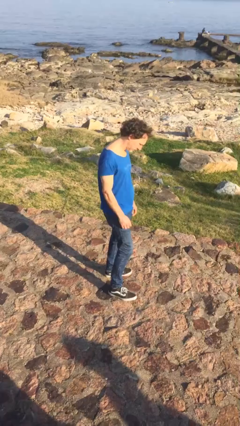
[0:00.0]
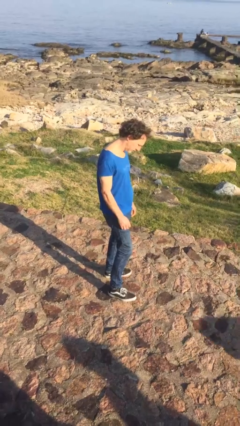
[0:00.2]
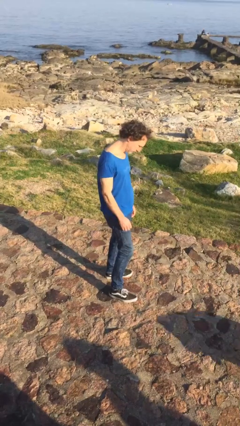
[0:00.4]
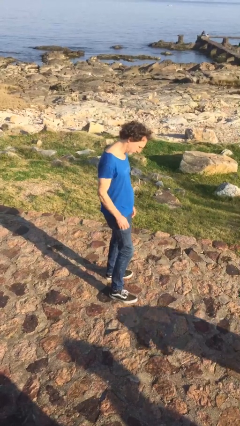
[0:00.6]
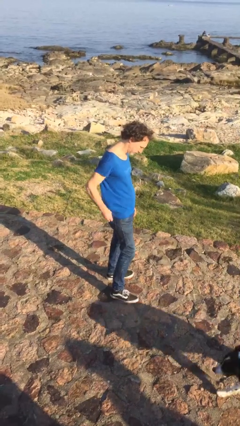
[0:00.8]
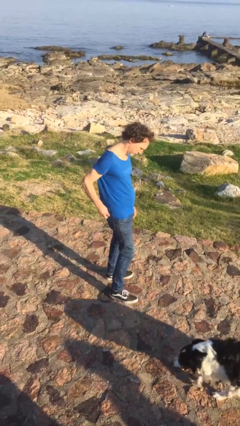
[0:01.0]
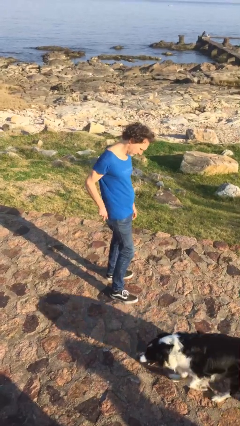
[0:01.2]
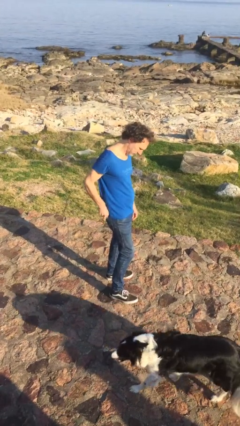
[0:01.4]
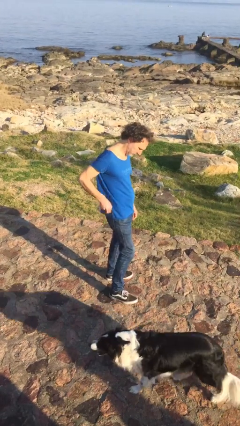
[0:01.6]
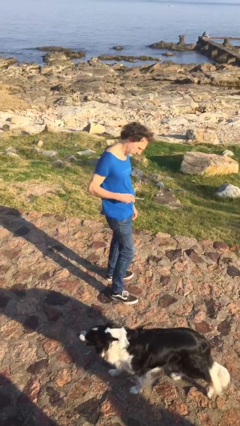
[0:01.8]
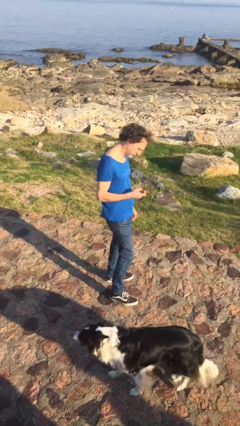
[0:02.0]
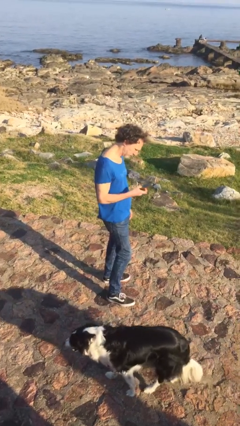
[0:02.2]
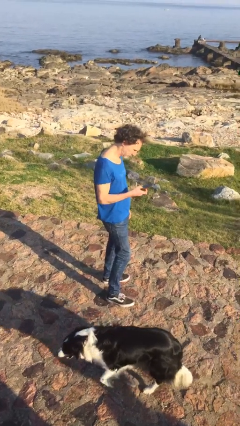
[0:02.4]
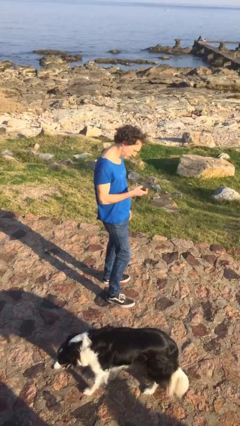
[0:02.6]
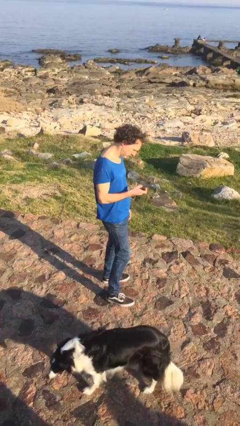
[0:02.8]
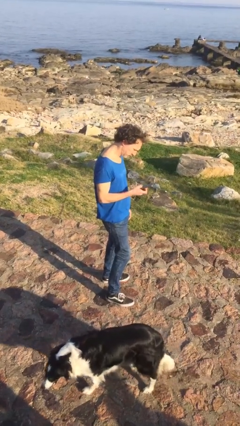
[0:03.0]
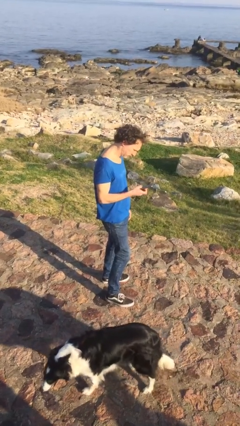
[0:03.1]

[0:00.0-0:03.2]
person takes phone from pocket

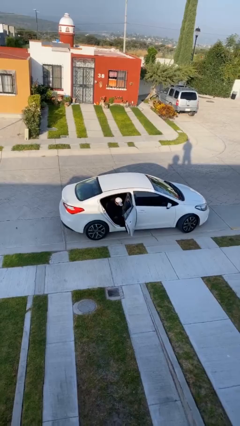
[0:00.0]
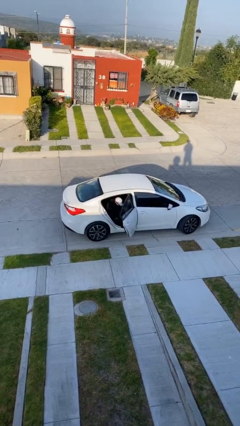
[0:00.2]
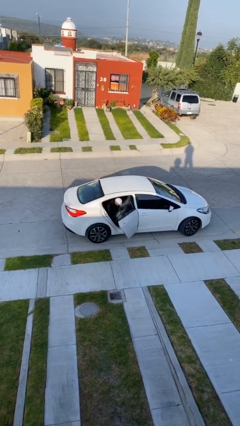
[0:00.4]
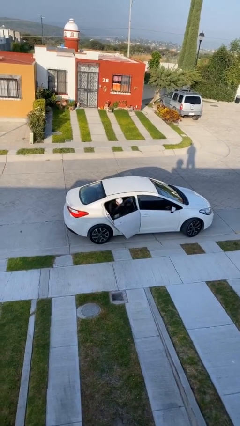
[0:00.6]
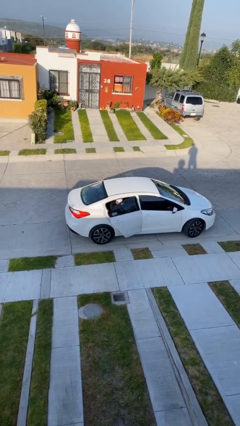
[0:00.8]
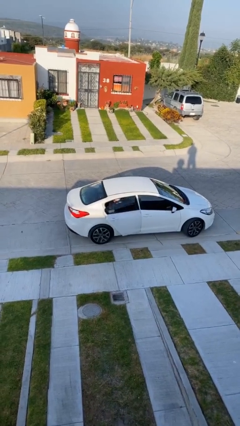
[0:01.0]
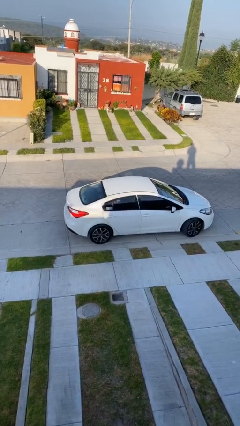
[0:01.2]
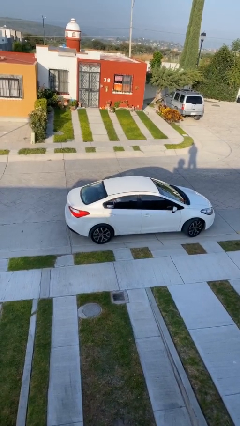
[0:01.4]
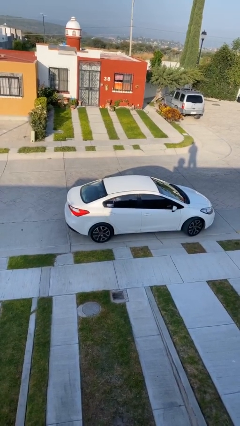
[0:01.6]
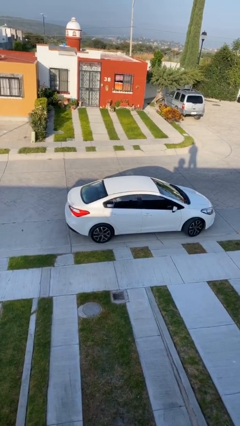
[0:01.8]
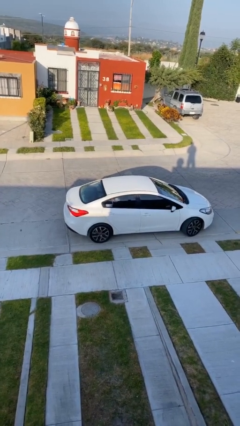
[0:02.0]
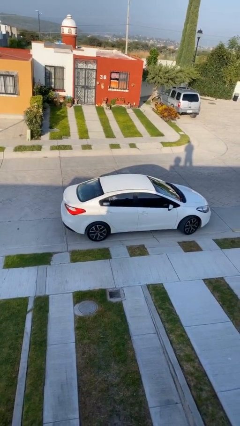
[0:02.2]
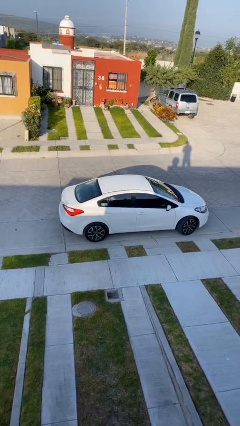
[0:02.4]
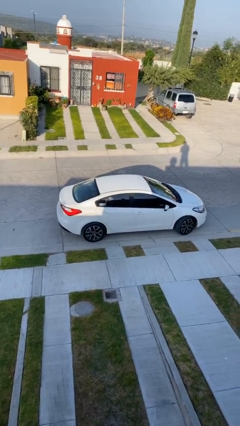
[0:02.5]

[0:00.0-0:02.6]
person closes car door

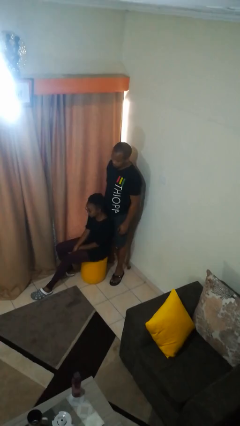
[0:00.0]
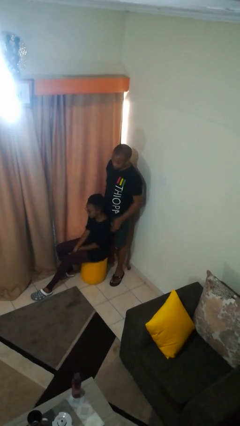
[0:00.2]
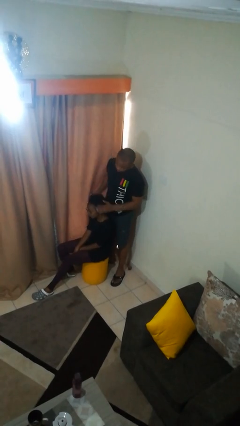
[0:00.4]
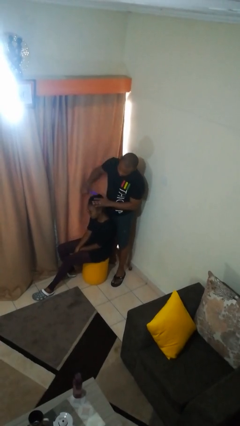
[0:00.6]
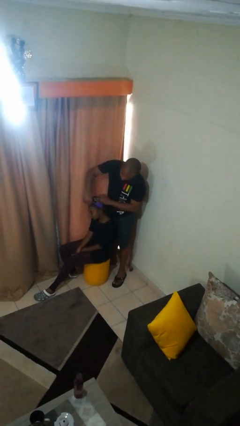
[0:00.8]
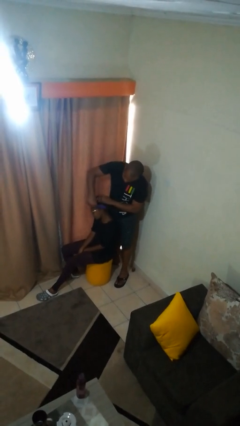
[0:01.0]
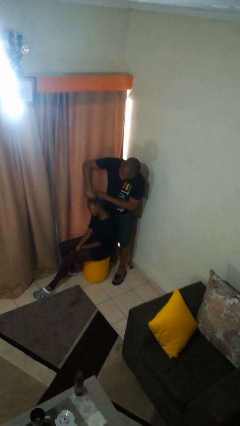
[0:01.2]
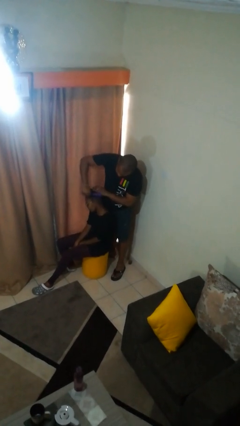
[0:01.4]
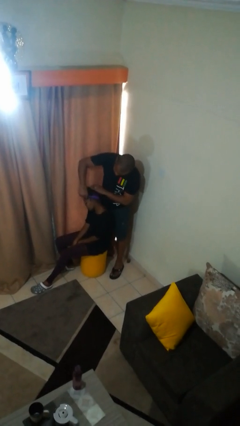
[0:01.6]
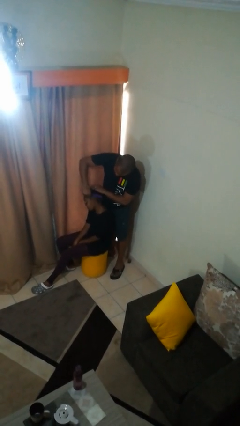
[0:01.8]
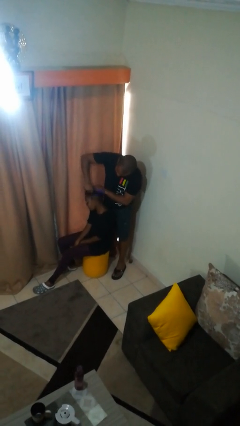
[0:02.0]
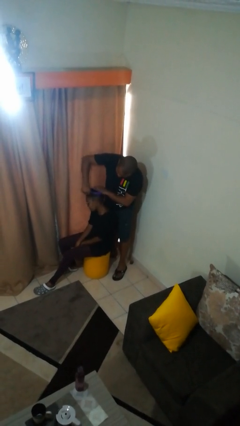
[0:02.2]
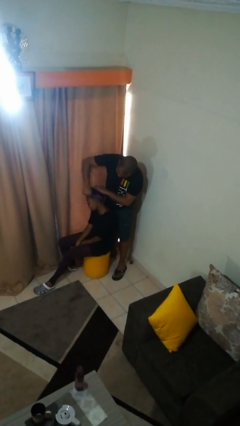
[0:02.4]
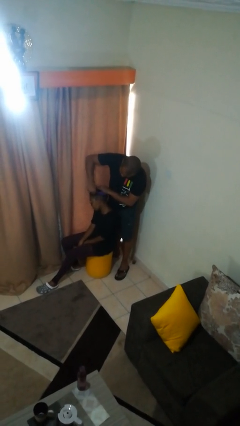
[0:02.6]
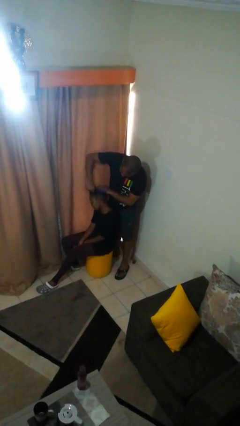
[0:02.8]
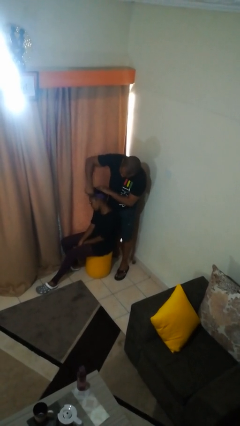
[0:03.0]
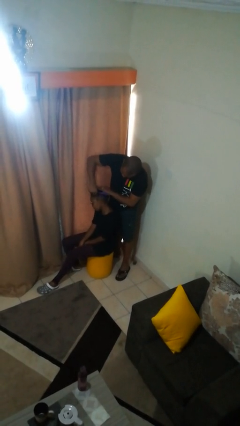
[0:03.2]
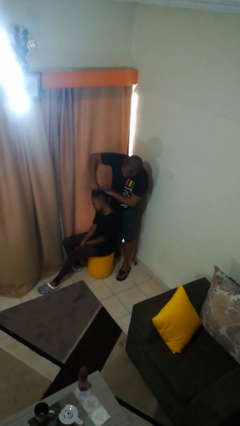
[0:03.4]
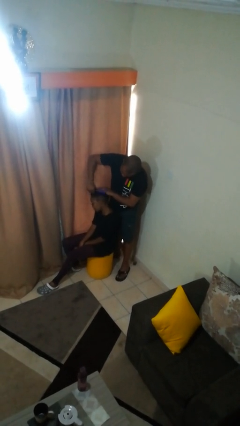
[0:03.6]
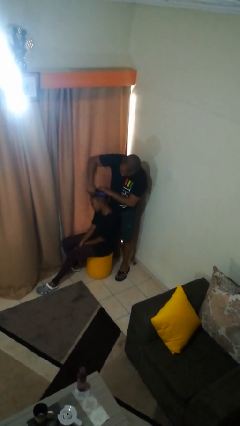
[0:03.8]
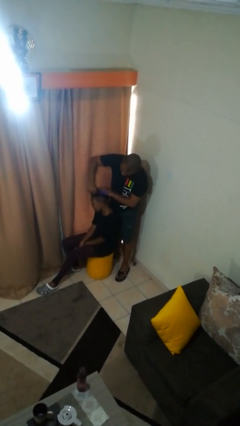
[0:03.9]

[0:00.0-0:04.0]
person brushes hair of person

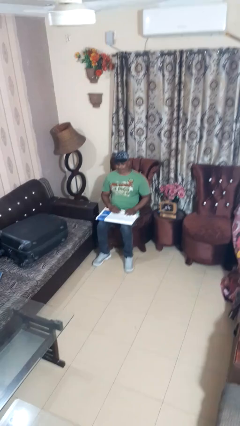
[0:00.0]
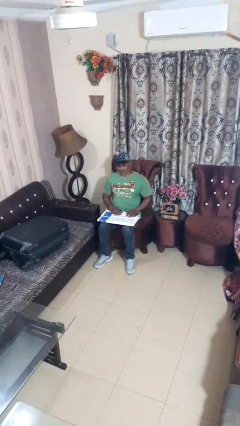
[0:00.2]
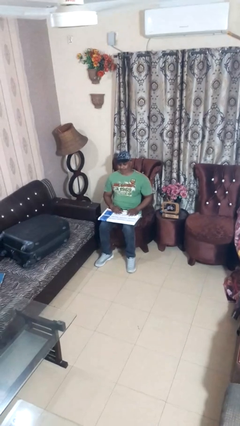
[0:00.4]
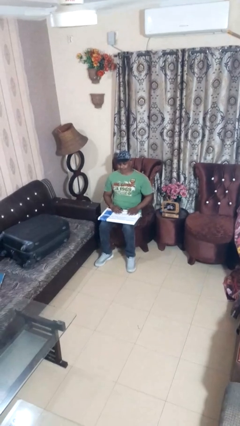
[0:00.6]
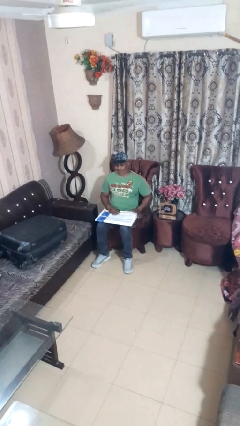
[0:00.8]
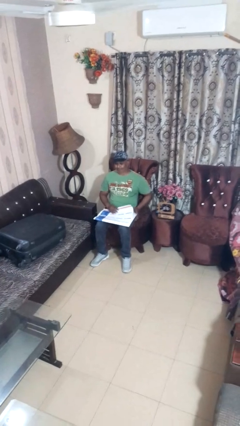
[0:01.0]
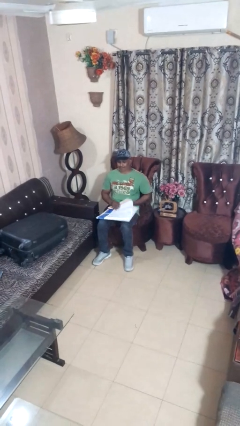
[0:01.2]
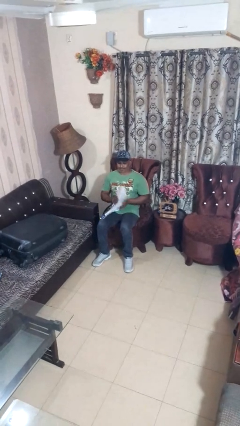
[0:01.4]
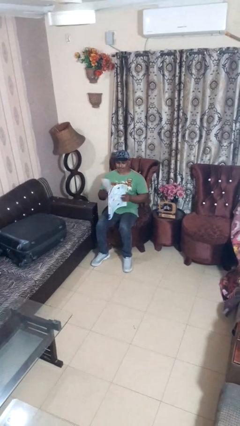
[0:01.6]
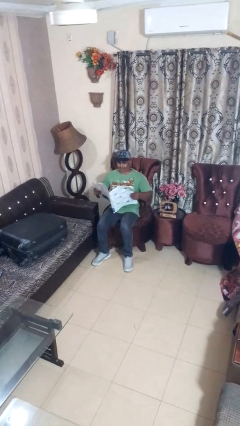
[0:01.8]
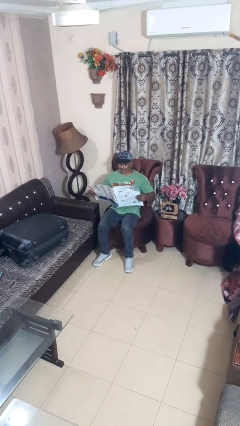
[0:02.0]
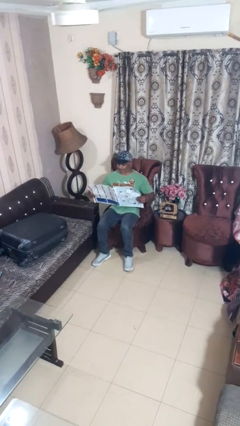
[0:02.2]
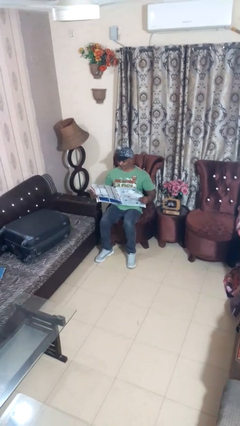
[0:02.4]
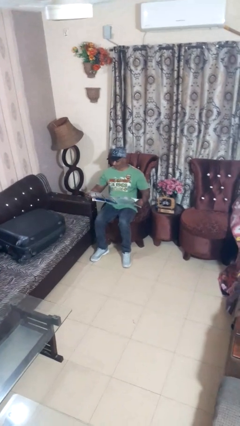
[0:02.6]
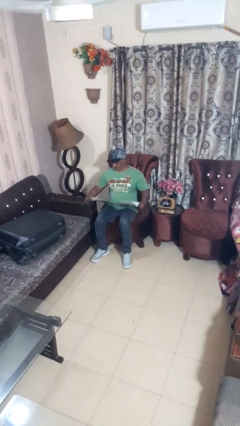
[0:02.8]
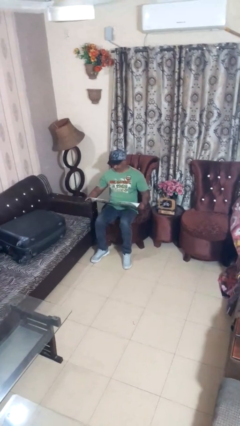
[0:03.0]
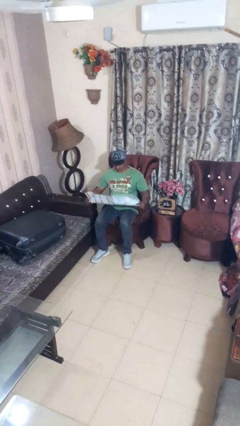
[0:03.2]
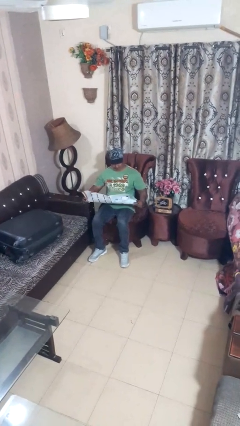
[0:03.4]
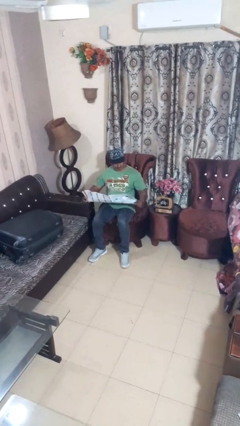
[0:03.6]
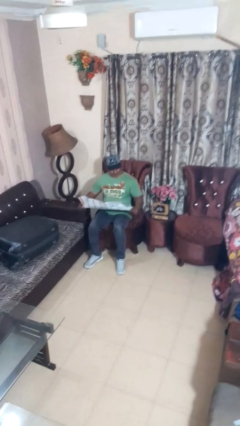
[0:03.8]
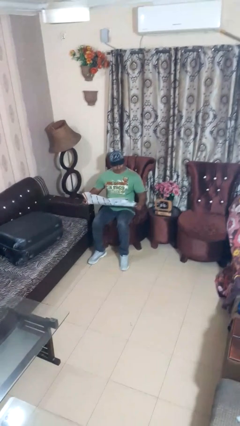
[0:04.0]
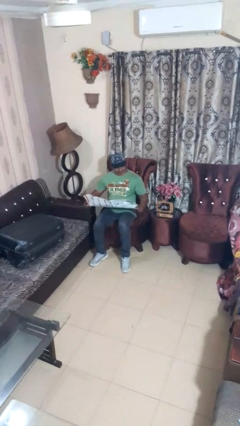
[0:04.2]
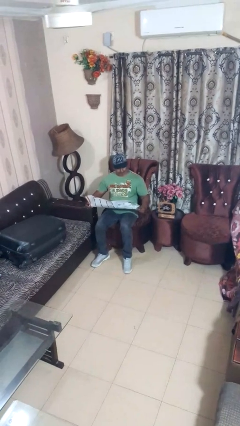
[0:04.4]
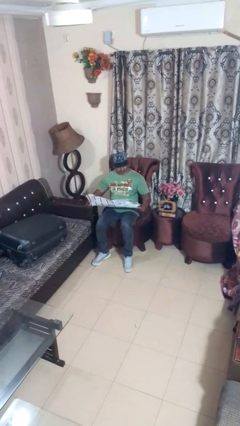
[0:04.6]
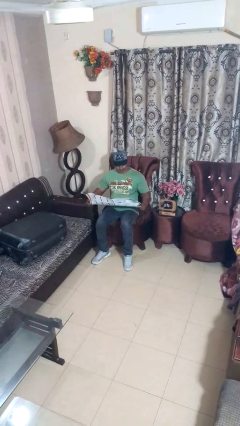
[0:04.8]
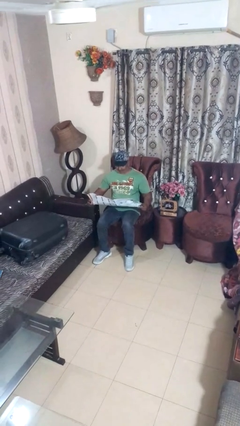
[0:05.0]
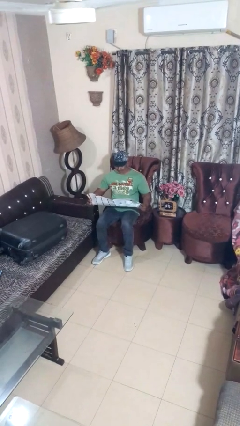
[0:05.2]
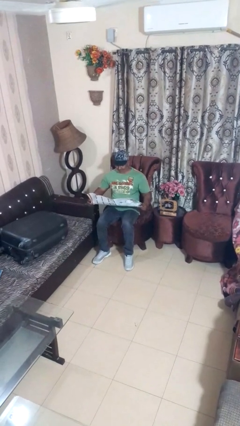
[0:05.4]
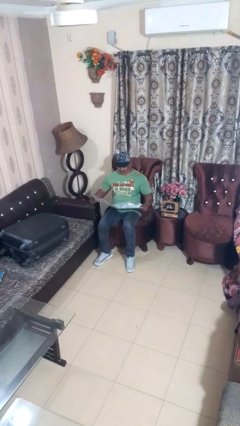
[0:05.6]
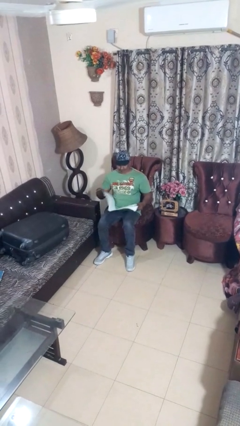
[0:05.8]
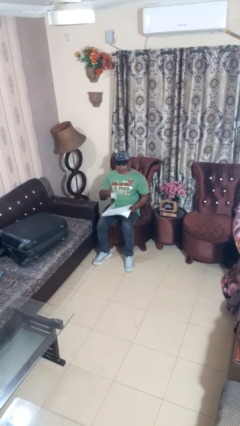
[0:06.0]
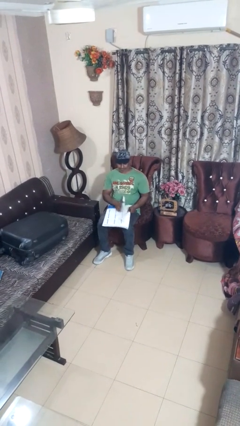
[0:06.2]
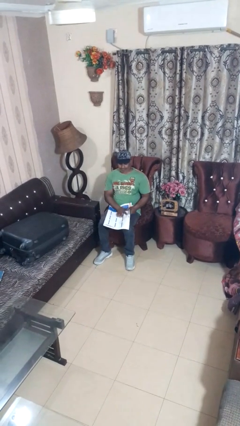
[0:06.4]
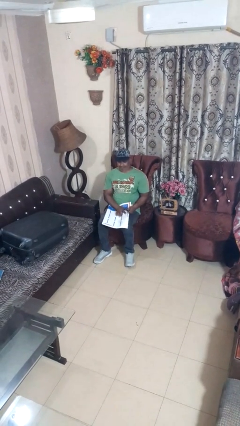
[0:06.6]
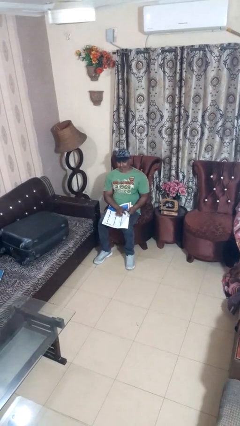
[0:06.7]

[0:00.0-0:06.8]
person reads newspaper

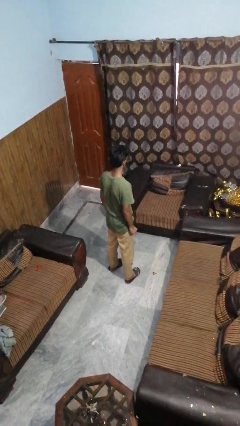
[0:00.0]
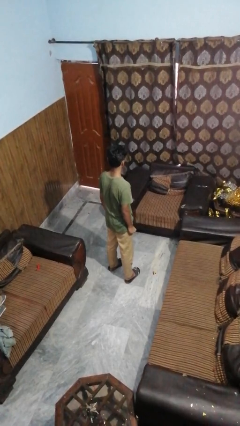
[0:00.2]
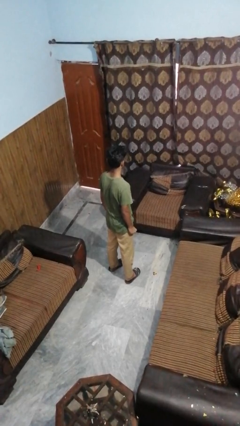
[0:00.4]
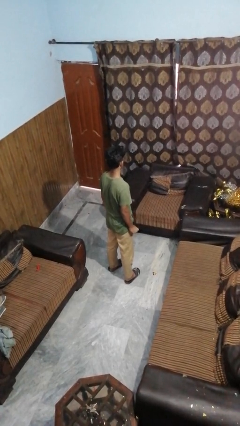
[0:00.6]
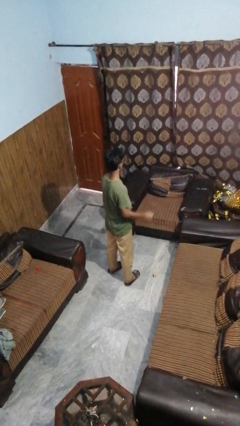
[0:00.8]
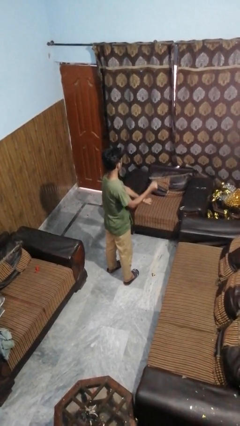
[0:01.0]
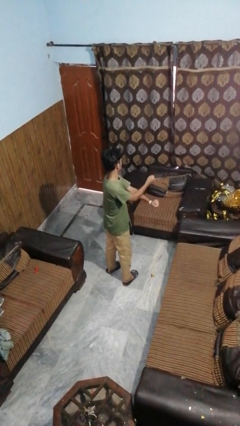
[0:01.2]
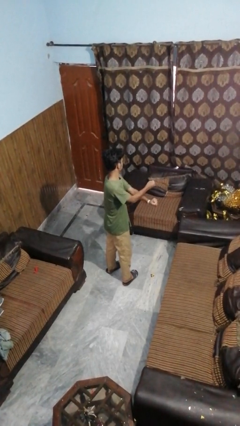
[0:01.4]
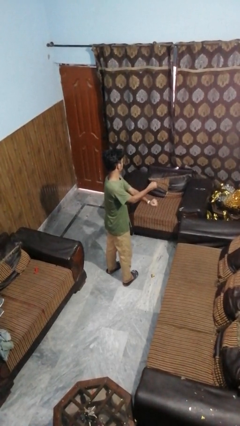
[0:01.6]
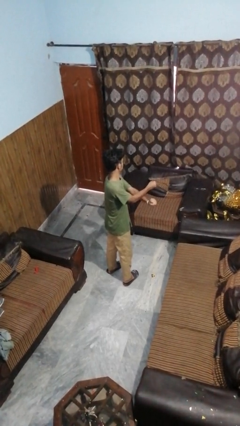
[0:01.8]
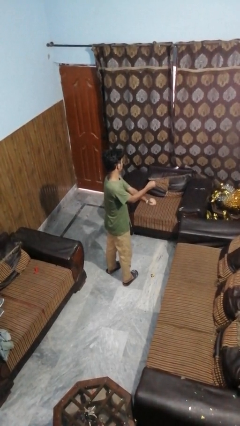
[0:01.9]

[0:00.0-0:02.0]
person gestures arms x
